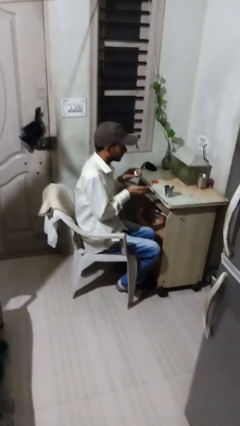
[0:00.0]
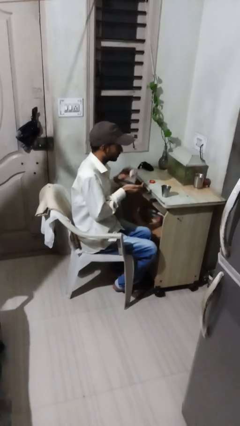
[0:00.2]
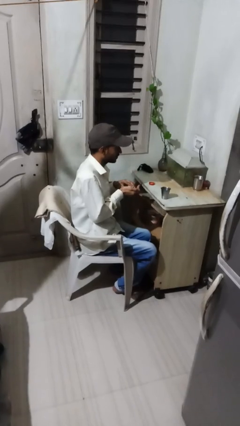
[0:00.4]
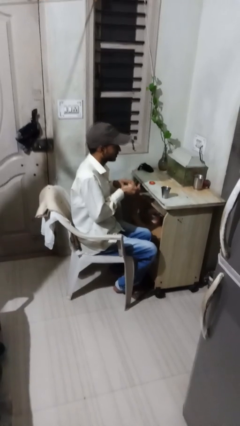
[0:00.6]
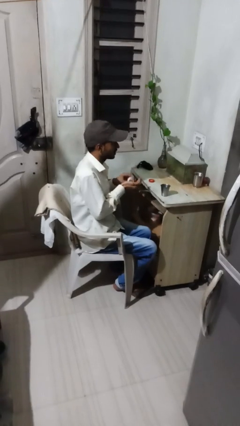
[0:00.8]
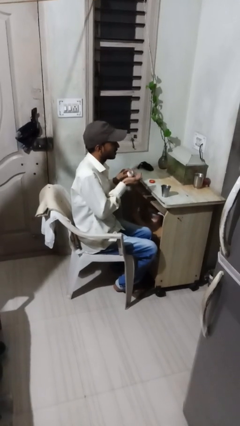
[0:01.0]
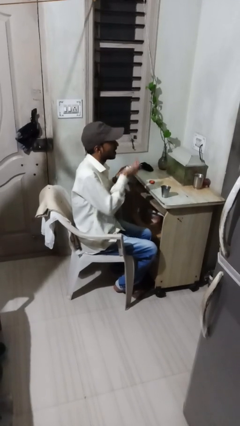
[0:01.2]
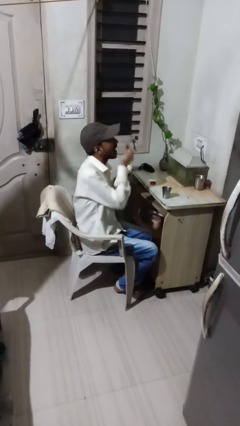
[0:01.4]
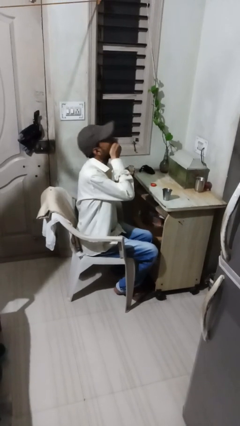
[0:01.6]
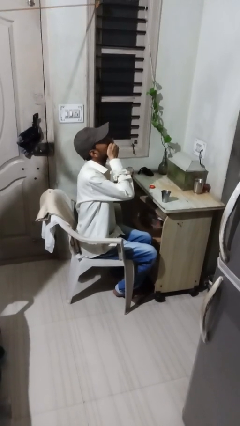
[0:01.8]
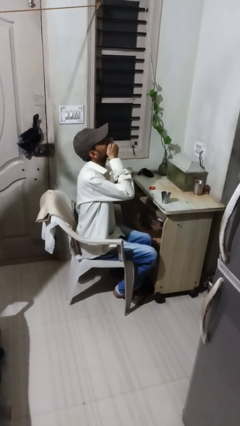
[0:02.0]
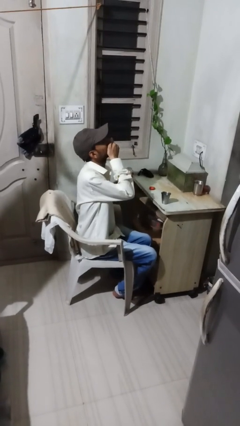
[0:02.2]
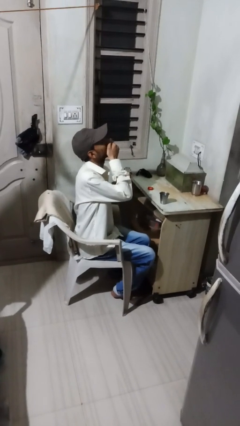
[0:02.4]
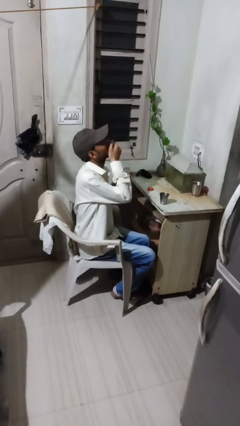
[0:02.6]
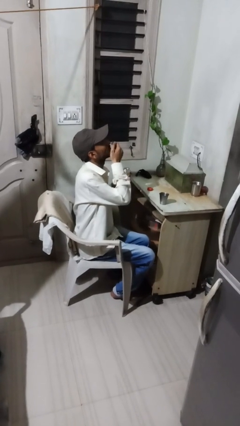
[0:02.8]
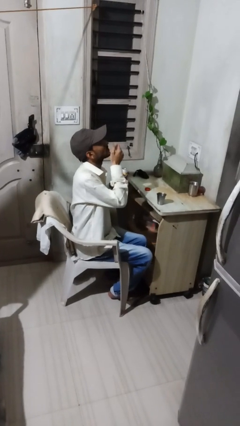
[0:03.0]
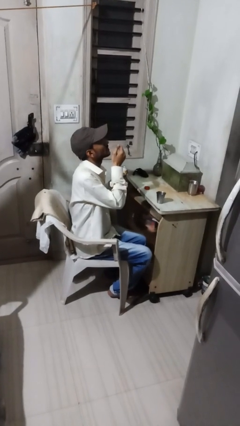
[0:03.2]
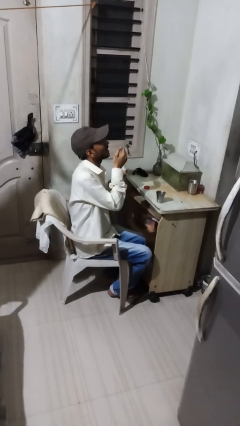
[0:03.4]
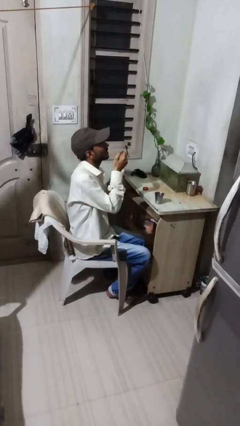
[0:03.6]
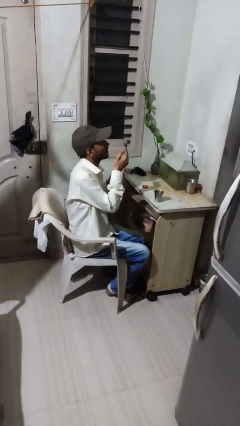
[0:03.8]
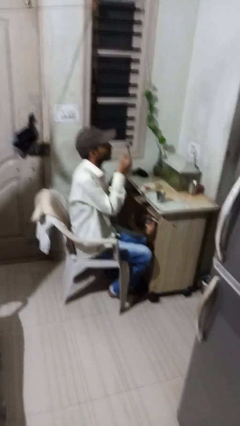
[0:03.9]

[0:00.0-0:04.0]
person takes medicine pills

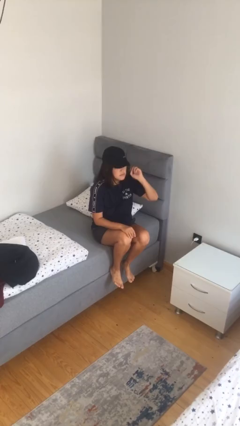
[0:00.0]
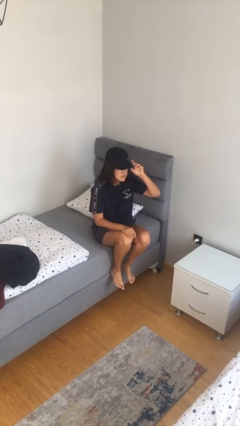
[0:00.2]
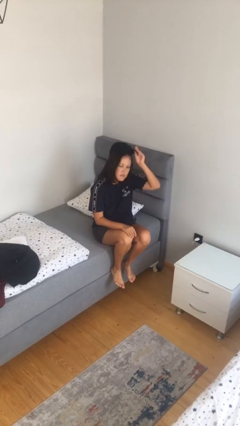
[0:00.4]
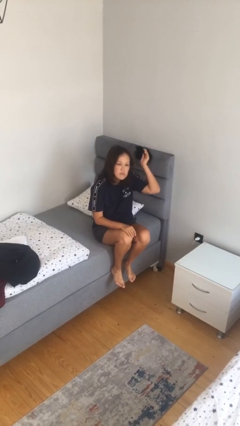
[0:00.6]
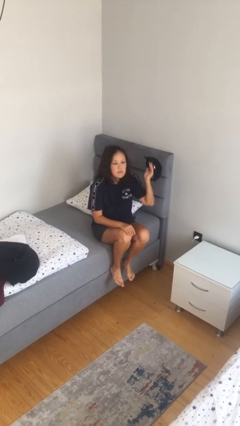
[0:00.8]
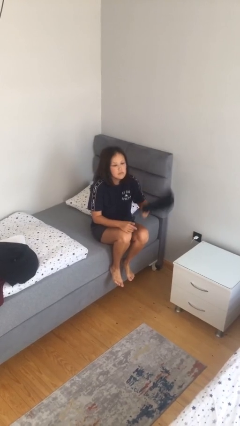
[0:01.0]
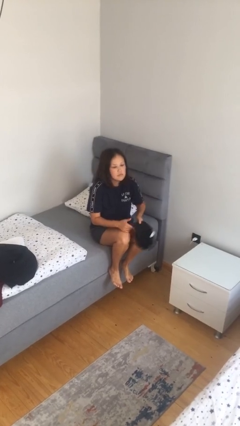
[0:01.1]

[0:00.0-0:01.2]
person takes off hat

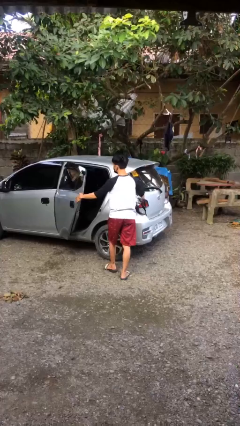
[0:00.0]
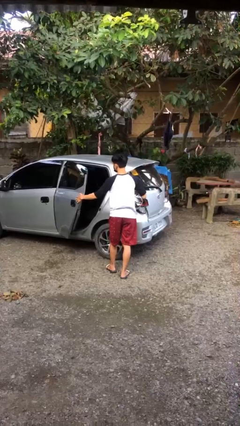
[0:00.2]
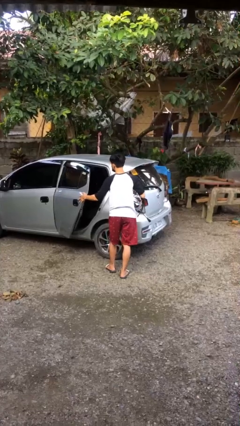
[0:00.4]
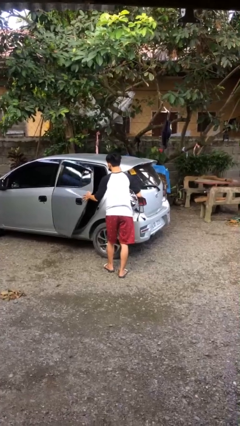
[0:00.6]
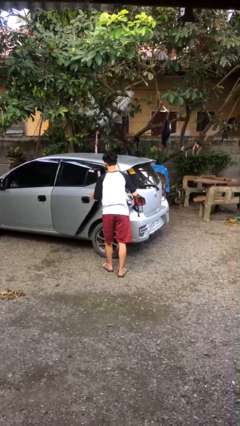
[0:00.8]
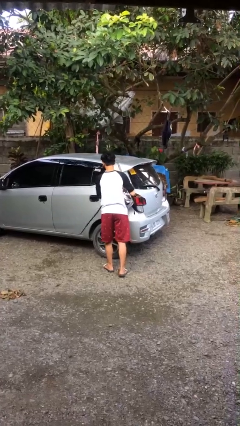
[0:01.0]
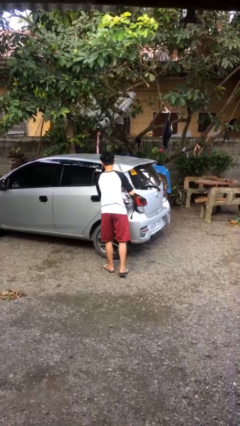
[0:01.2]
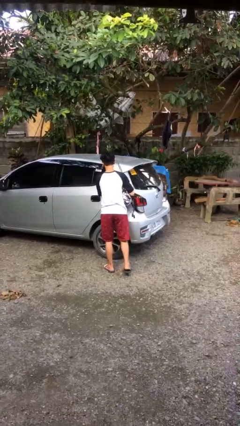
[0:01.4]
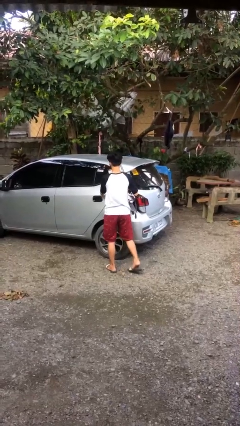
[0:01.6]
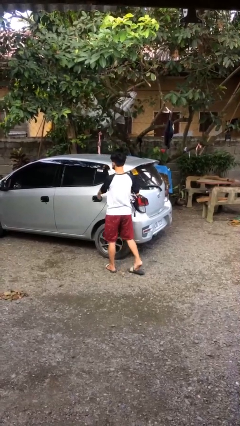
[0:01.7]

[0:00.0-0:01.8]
person closes car door

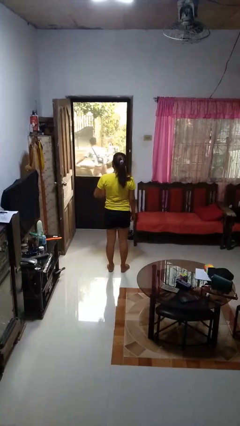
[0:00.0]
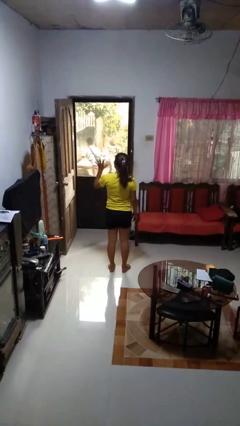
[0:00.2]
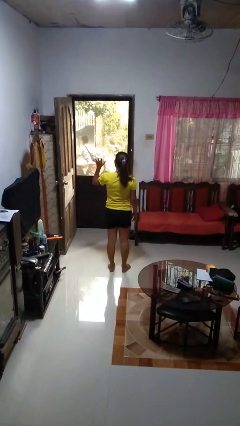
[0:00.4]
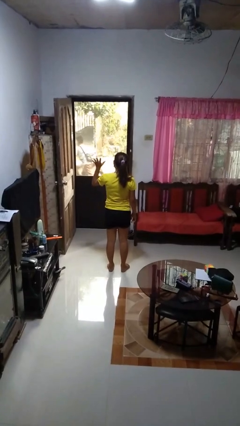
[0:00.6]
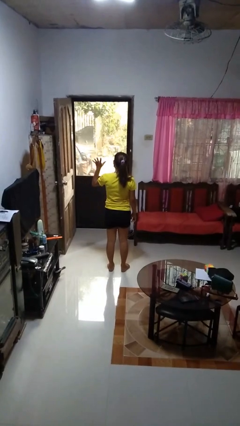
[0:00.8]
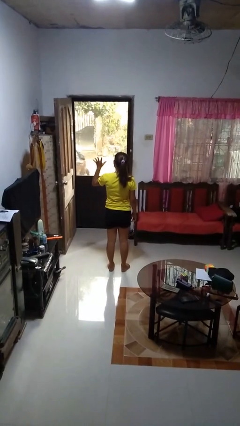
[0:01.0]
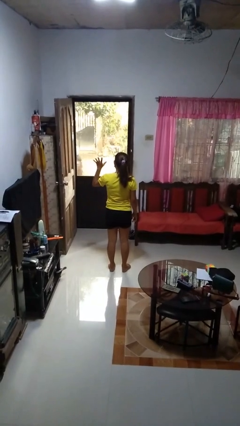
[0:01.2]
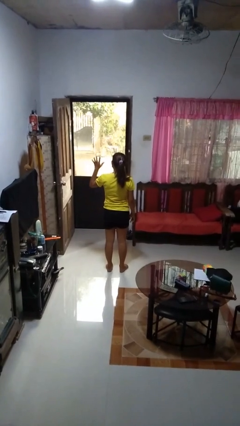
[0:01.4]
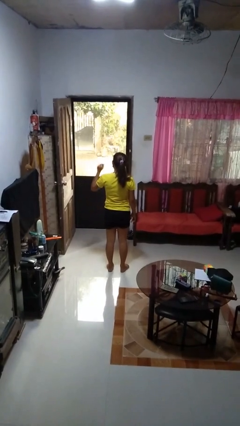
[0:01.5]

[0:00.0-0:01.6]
person gestures number five

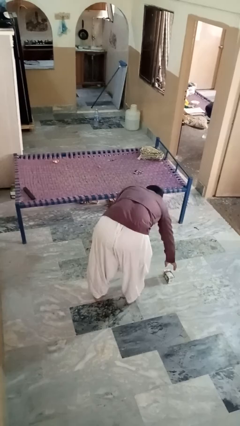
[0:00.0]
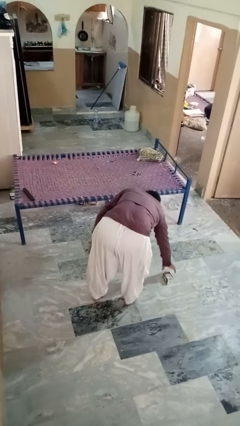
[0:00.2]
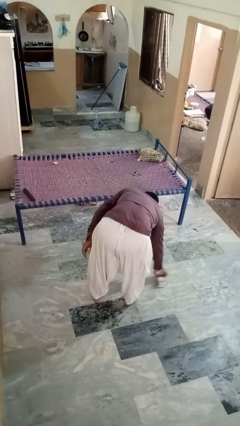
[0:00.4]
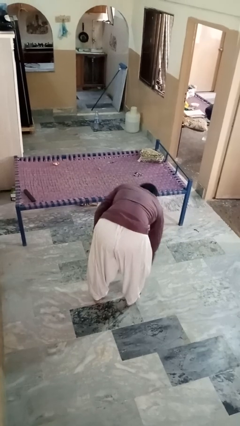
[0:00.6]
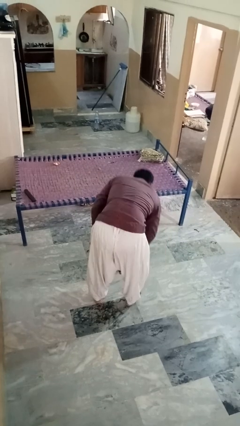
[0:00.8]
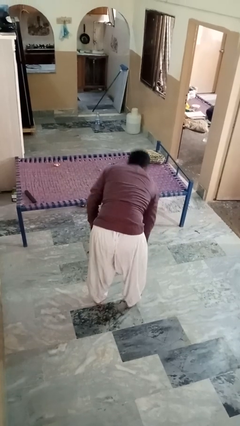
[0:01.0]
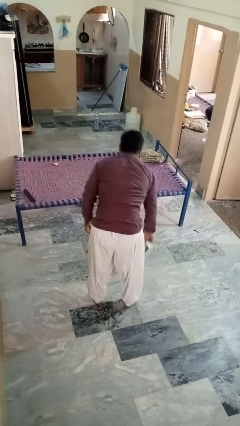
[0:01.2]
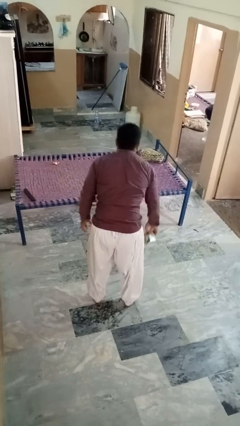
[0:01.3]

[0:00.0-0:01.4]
person picks up object from floor

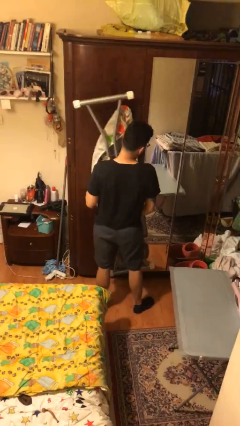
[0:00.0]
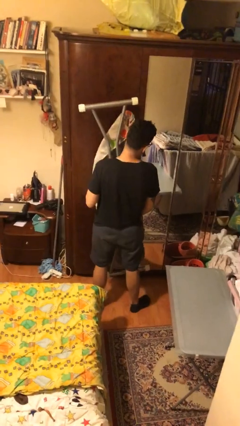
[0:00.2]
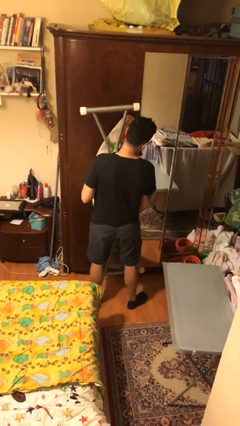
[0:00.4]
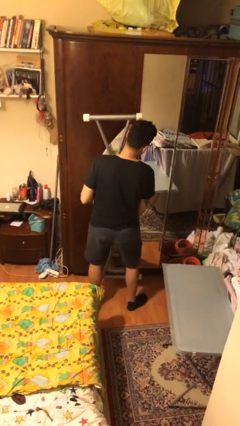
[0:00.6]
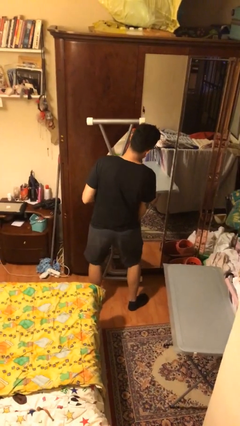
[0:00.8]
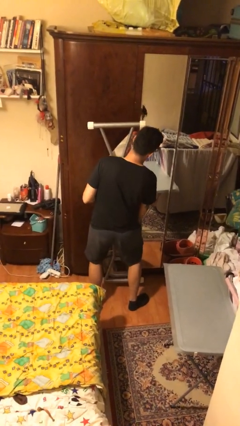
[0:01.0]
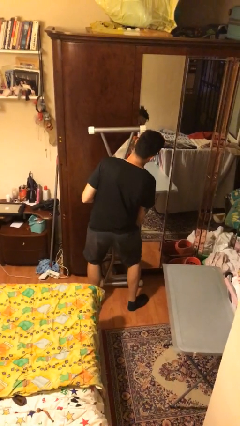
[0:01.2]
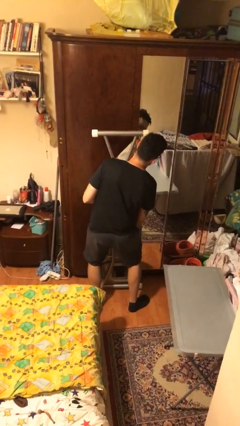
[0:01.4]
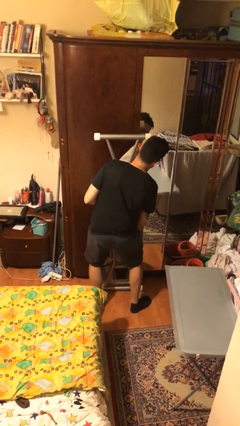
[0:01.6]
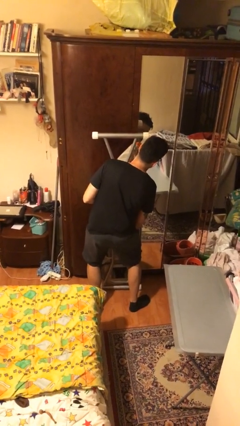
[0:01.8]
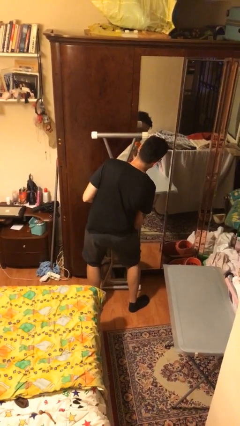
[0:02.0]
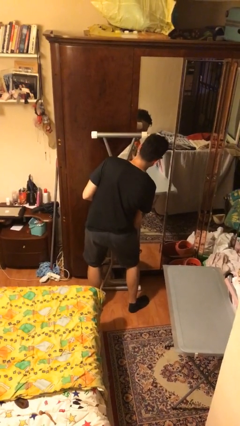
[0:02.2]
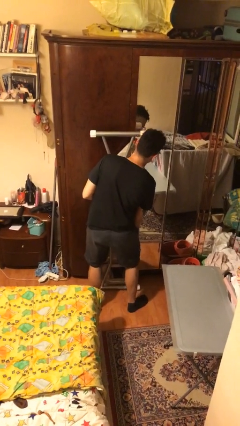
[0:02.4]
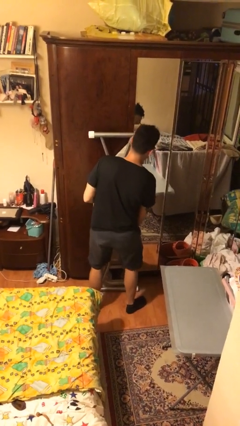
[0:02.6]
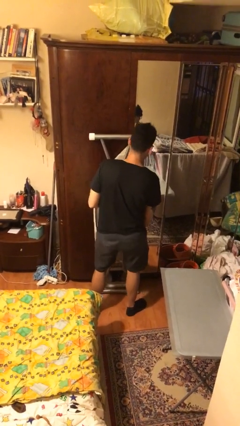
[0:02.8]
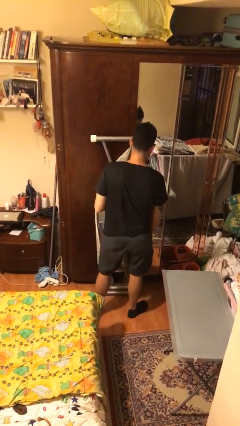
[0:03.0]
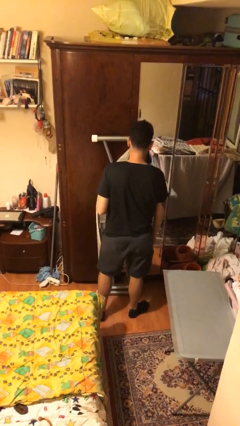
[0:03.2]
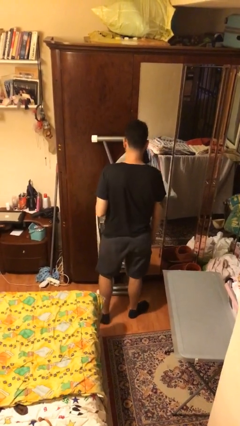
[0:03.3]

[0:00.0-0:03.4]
person puts down object on floor

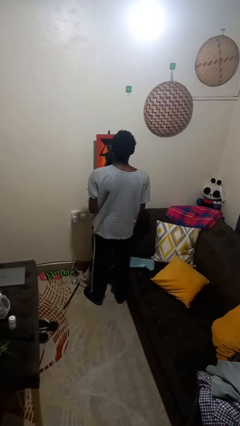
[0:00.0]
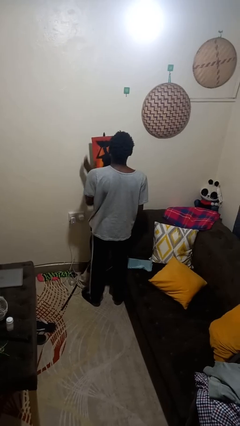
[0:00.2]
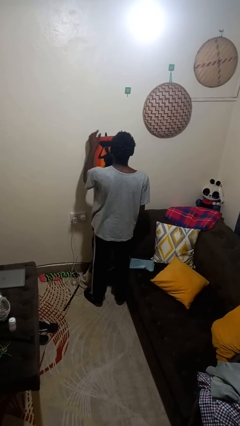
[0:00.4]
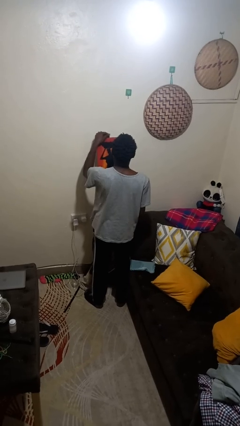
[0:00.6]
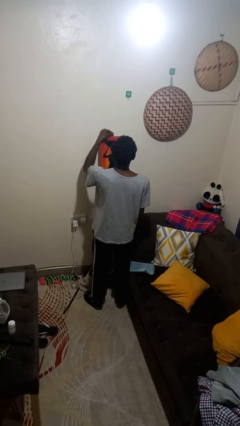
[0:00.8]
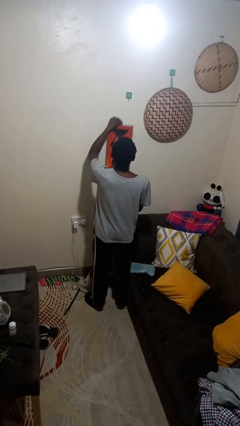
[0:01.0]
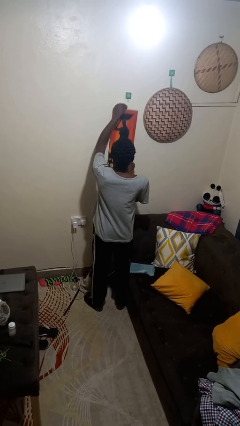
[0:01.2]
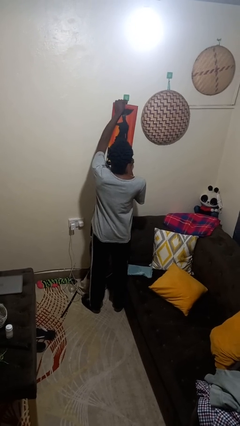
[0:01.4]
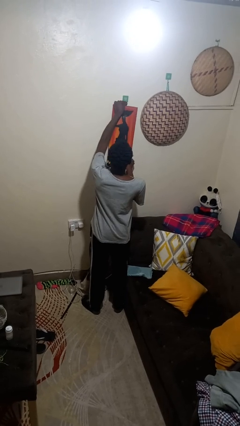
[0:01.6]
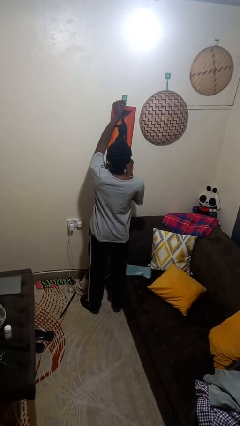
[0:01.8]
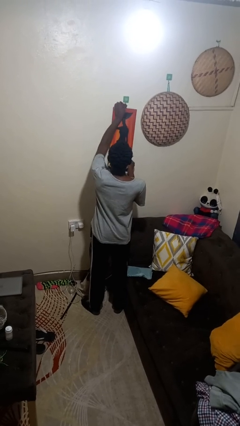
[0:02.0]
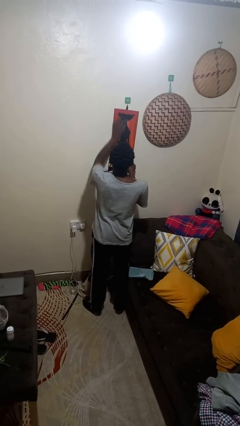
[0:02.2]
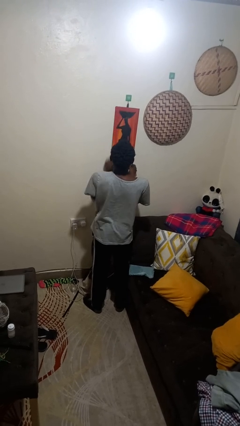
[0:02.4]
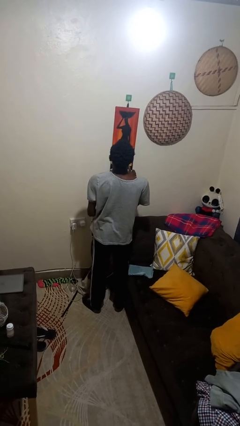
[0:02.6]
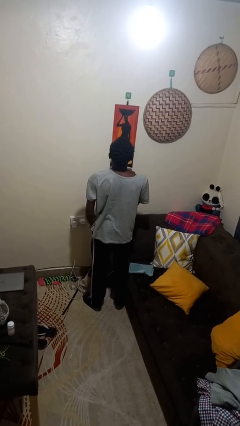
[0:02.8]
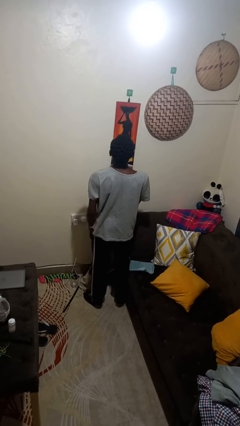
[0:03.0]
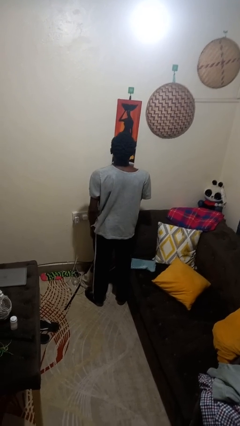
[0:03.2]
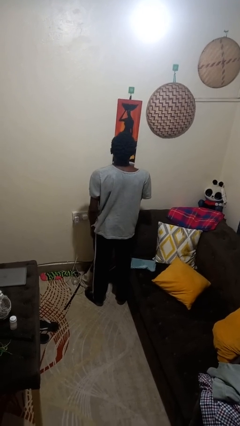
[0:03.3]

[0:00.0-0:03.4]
person puts up picture frame
